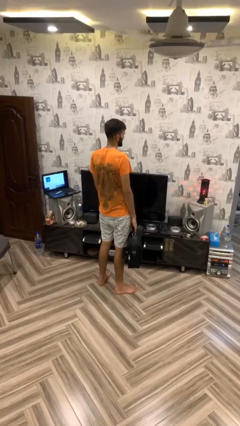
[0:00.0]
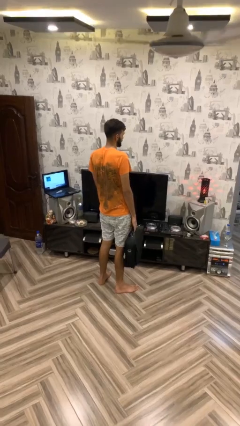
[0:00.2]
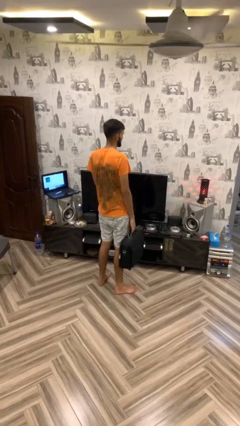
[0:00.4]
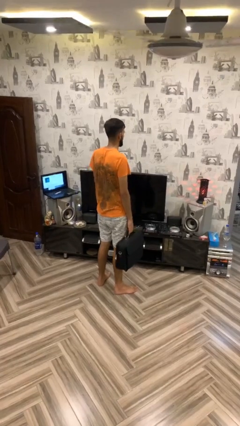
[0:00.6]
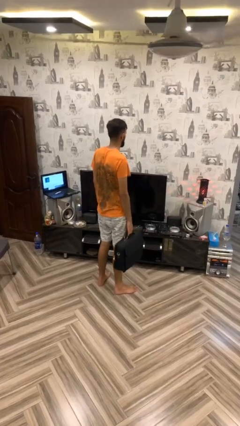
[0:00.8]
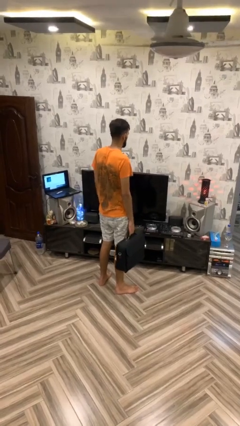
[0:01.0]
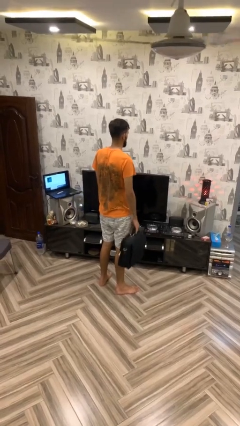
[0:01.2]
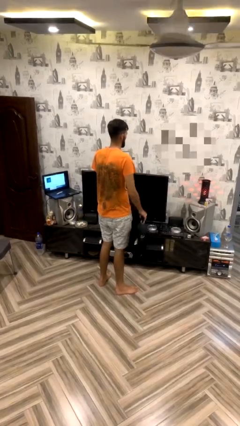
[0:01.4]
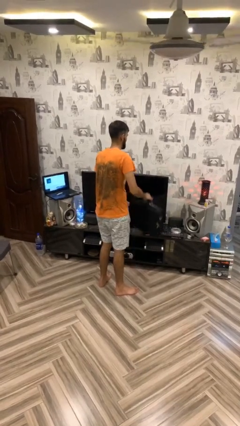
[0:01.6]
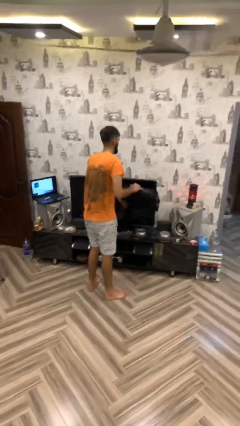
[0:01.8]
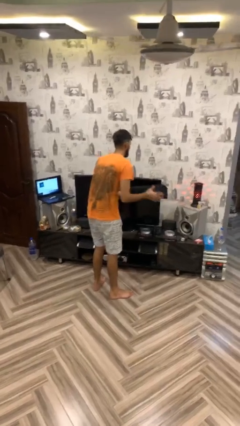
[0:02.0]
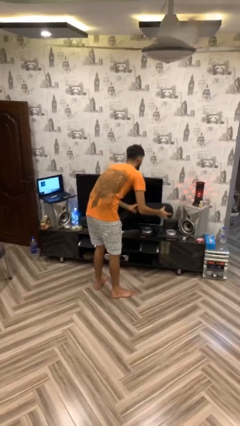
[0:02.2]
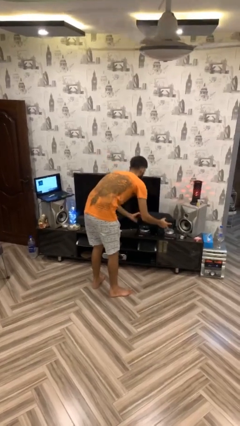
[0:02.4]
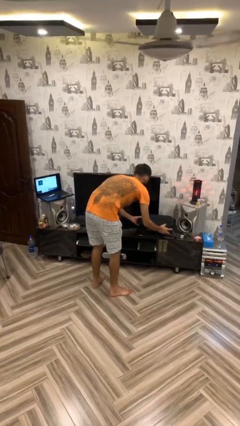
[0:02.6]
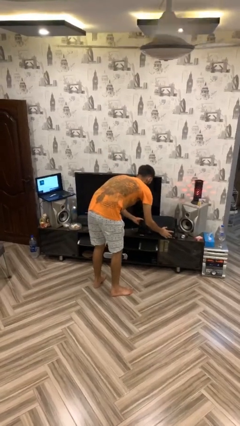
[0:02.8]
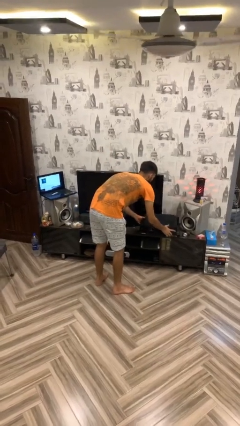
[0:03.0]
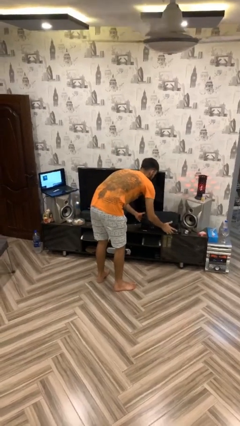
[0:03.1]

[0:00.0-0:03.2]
person puts down object on table

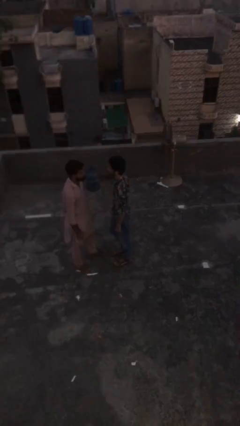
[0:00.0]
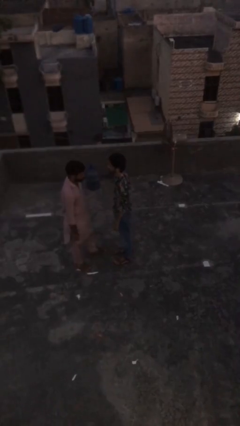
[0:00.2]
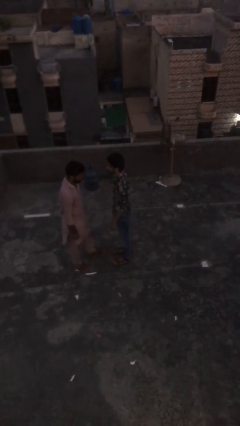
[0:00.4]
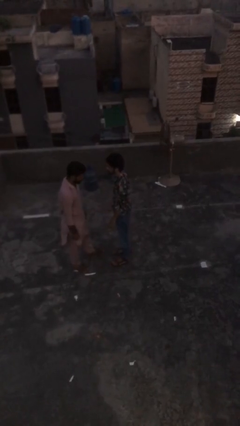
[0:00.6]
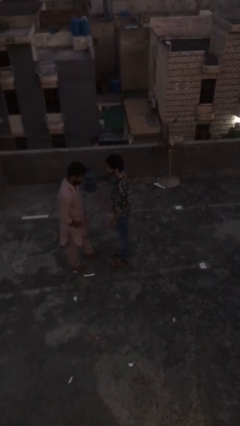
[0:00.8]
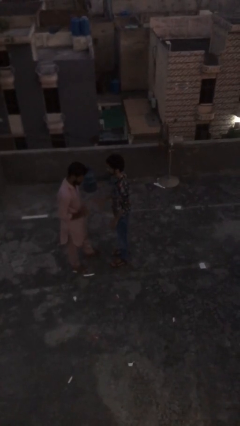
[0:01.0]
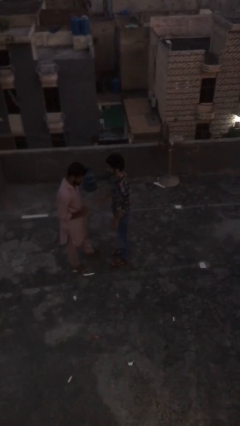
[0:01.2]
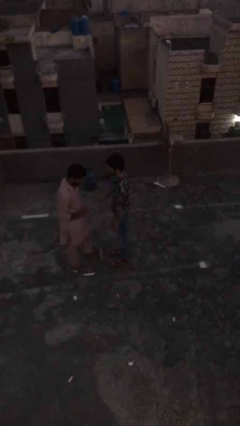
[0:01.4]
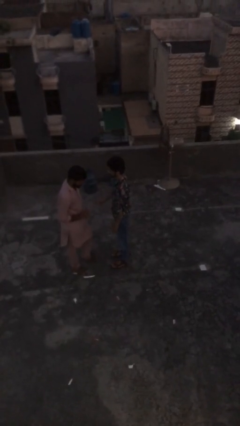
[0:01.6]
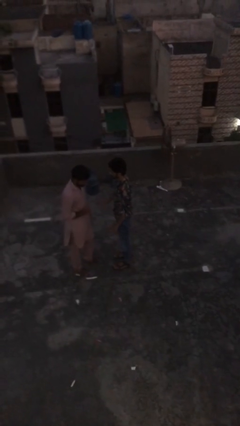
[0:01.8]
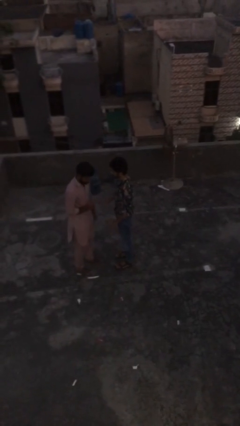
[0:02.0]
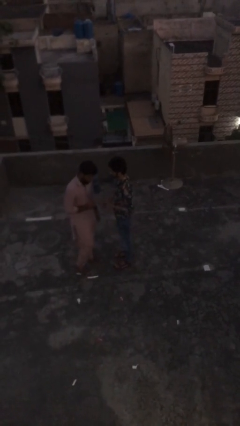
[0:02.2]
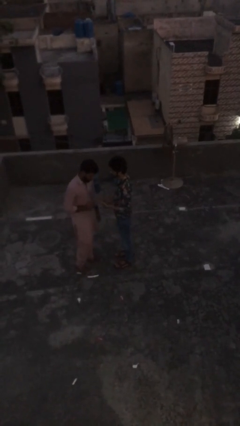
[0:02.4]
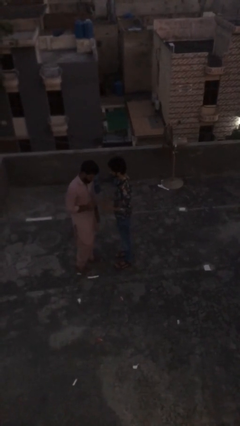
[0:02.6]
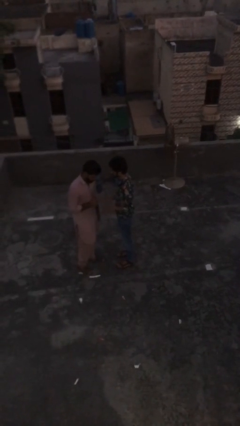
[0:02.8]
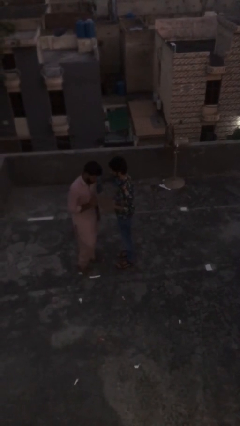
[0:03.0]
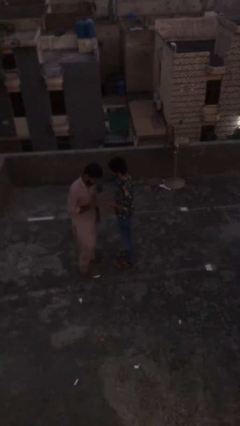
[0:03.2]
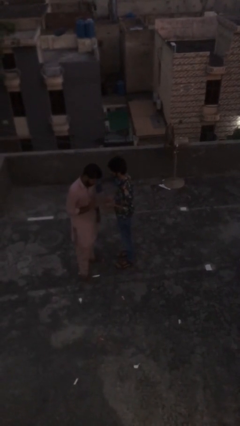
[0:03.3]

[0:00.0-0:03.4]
person talks to person

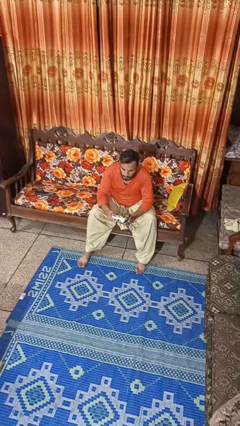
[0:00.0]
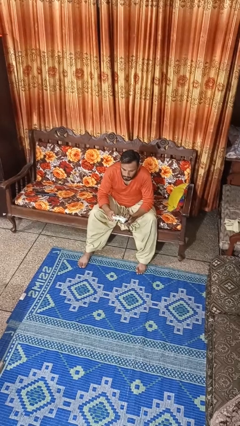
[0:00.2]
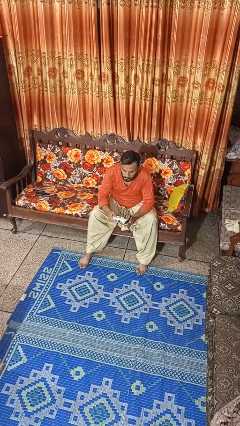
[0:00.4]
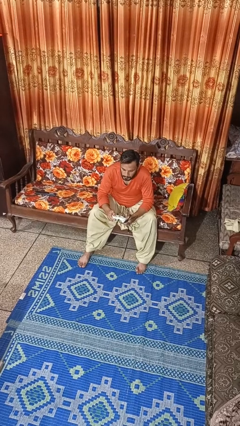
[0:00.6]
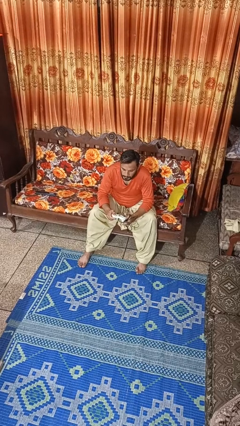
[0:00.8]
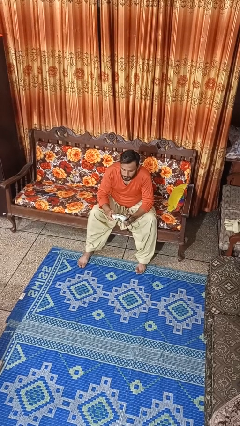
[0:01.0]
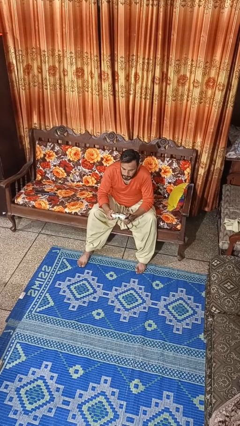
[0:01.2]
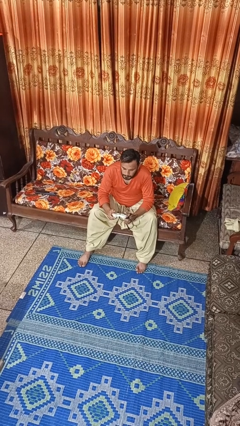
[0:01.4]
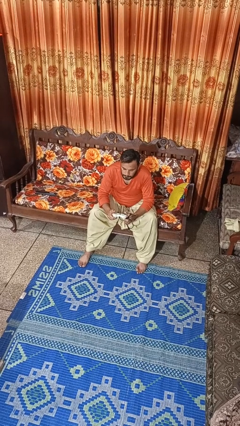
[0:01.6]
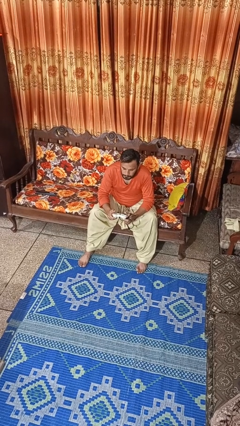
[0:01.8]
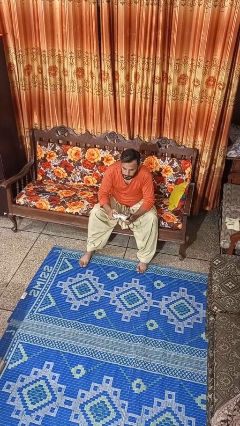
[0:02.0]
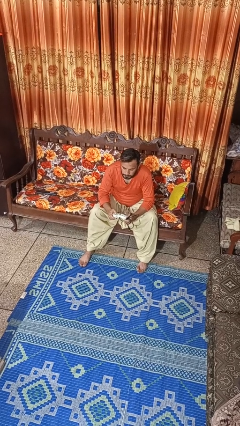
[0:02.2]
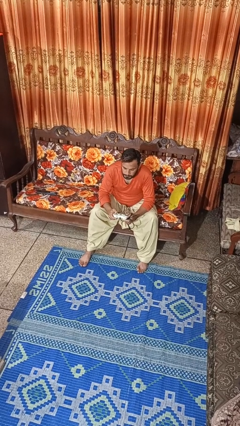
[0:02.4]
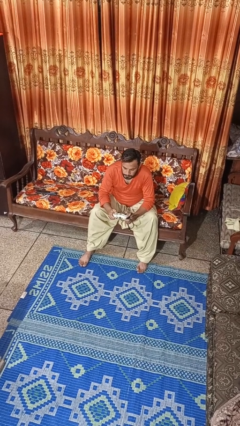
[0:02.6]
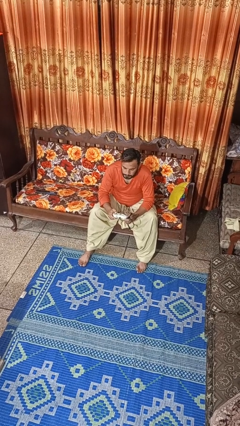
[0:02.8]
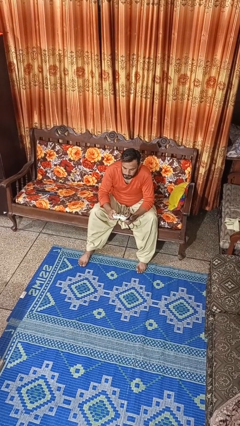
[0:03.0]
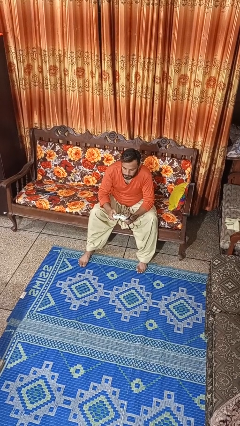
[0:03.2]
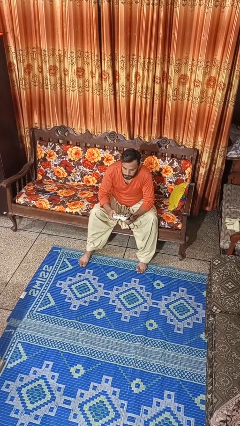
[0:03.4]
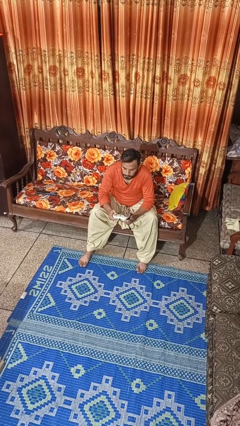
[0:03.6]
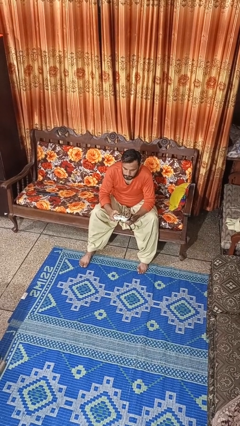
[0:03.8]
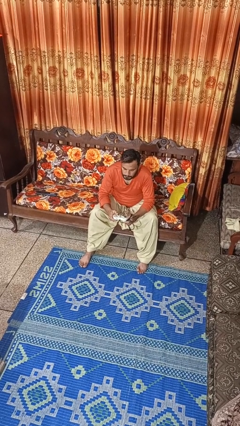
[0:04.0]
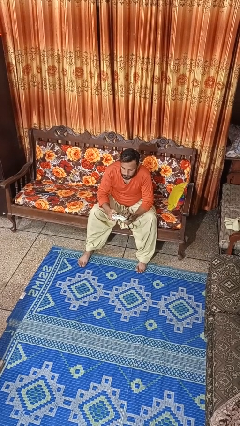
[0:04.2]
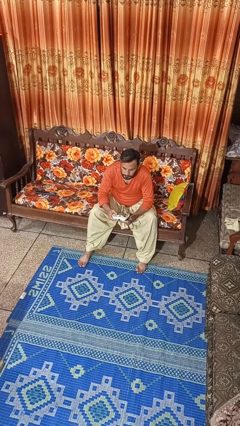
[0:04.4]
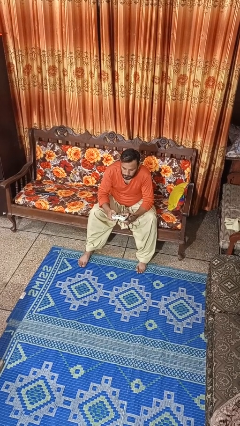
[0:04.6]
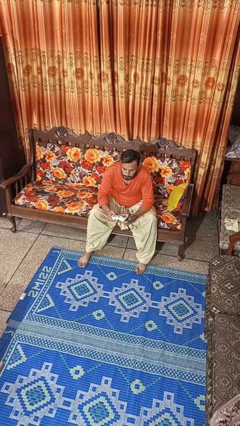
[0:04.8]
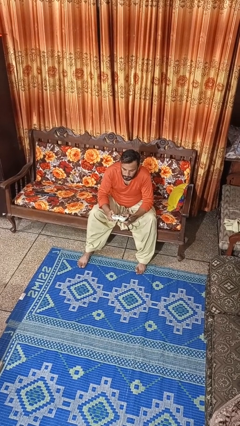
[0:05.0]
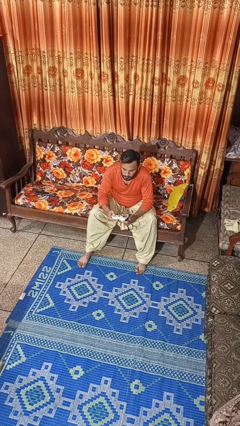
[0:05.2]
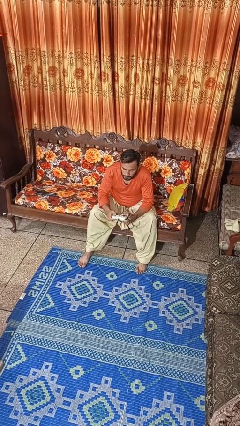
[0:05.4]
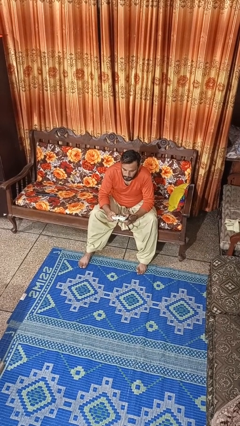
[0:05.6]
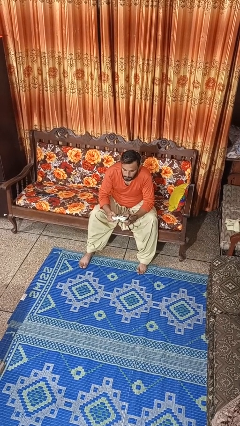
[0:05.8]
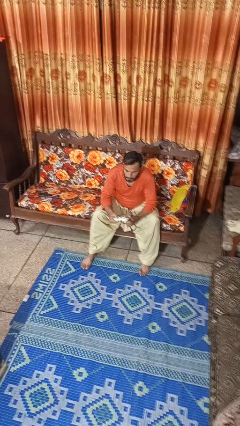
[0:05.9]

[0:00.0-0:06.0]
person interacts with handheld game

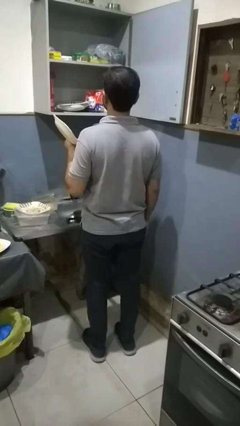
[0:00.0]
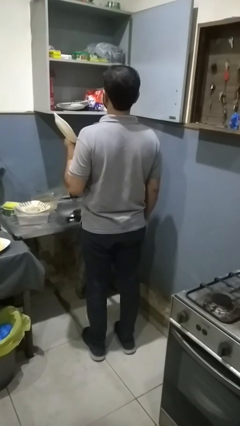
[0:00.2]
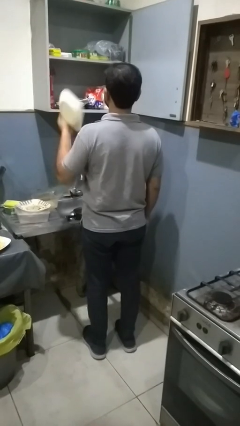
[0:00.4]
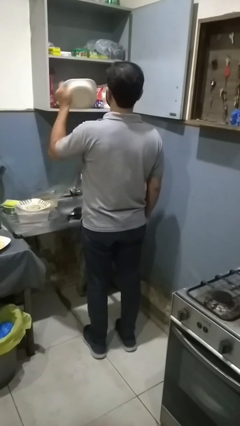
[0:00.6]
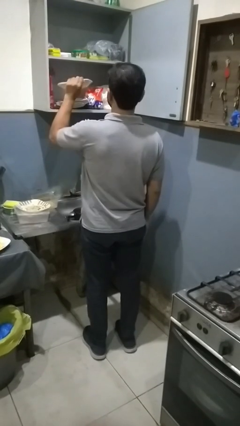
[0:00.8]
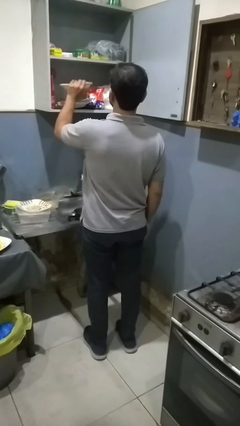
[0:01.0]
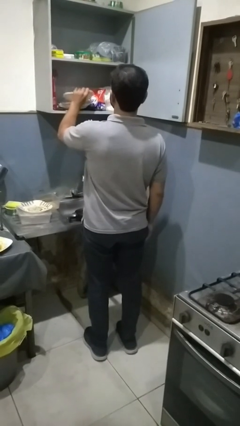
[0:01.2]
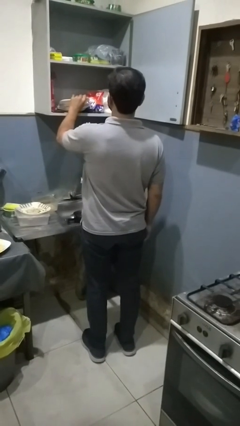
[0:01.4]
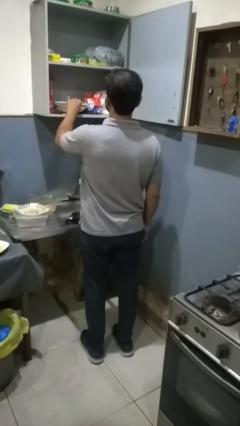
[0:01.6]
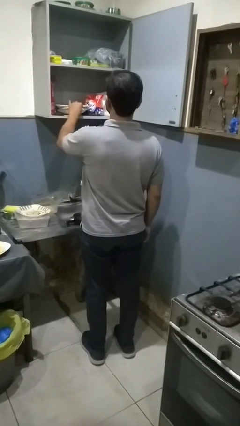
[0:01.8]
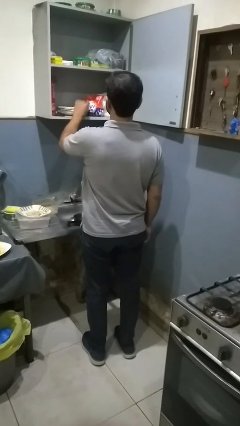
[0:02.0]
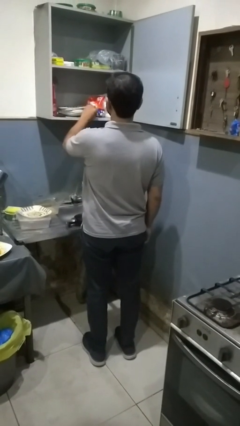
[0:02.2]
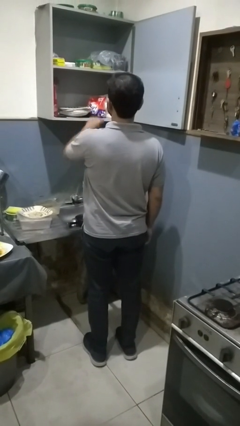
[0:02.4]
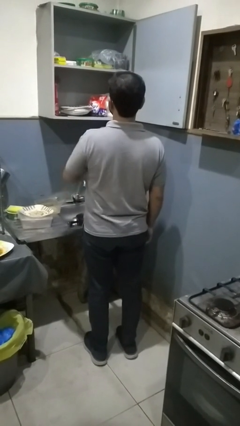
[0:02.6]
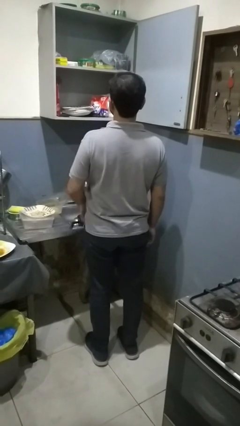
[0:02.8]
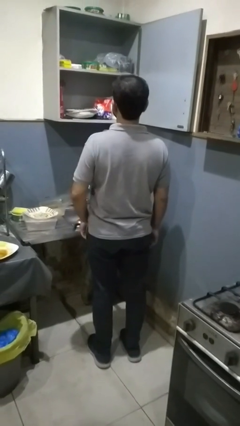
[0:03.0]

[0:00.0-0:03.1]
person puts object in cabinet

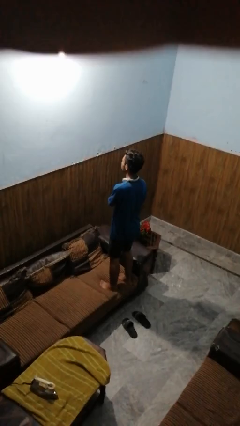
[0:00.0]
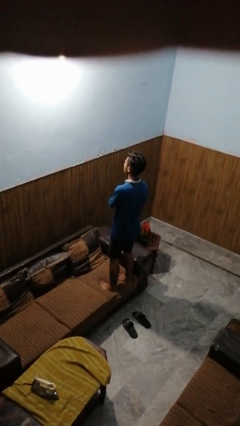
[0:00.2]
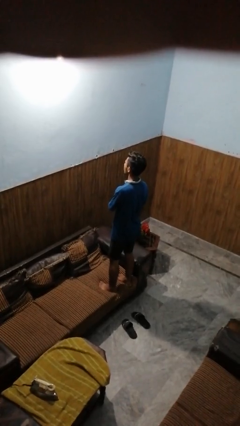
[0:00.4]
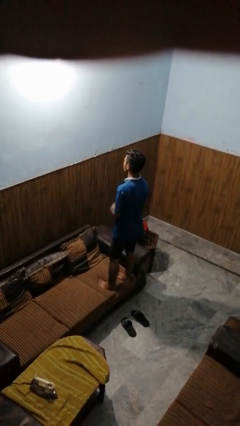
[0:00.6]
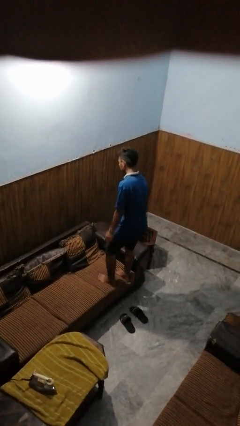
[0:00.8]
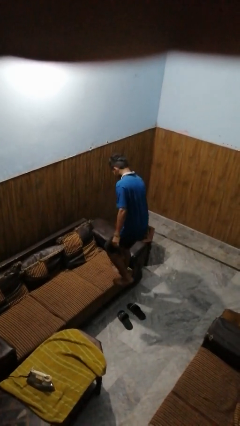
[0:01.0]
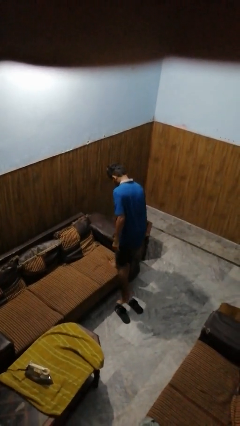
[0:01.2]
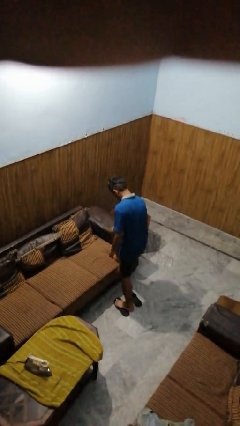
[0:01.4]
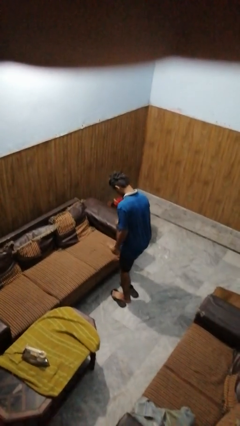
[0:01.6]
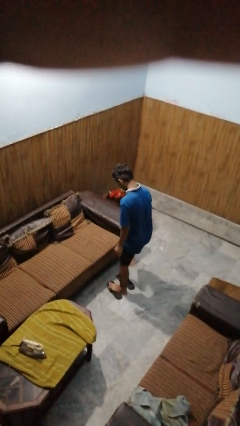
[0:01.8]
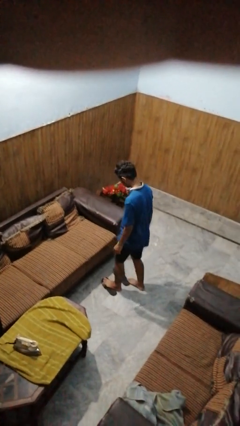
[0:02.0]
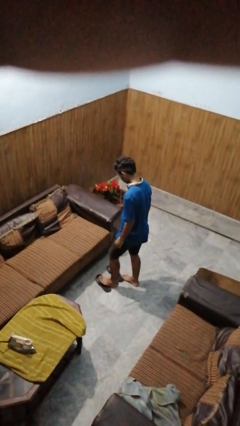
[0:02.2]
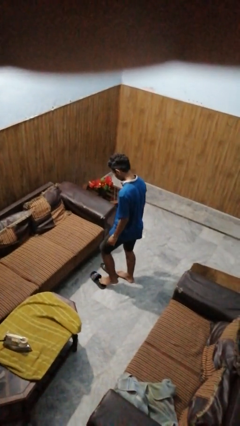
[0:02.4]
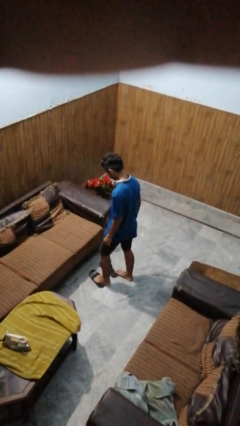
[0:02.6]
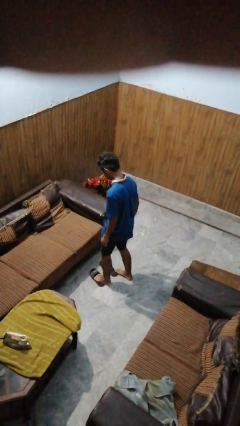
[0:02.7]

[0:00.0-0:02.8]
person climbs off couch
